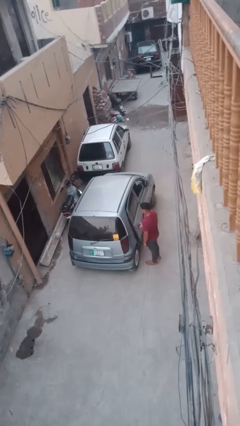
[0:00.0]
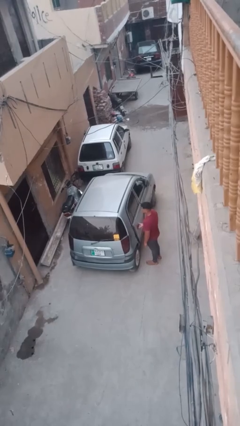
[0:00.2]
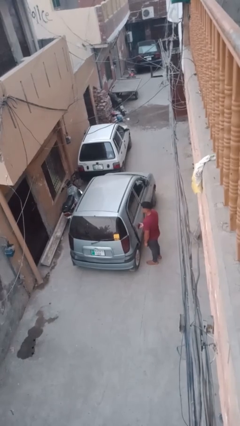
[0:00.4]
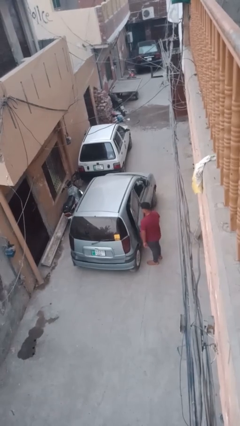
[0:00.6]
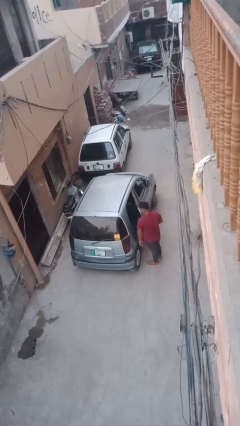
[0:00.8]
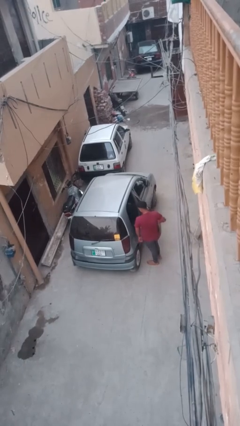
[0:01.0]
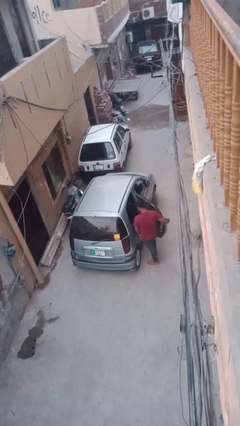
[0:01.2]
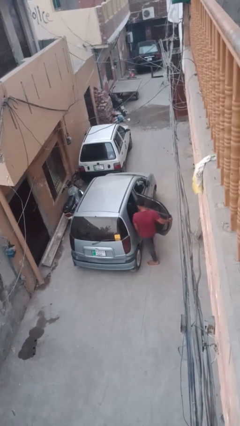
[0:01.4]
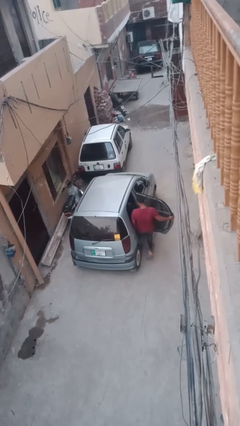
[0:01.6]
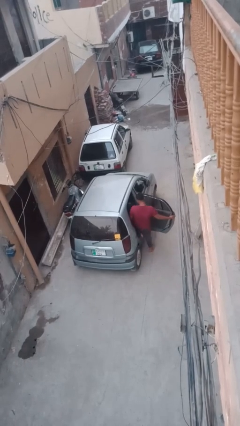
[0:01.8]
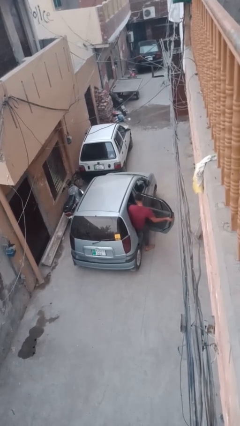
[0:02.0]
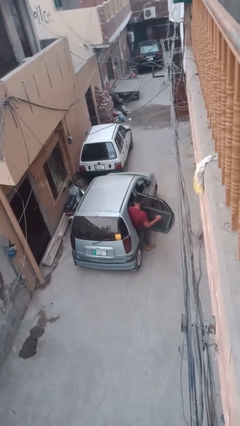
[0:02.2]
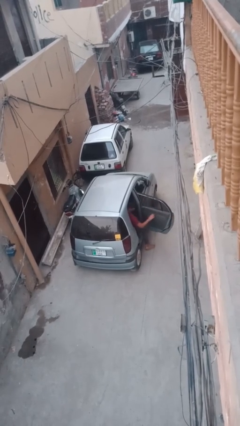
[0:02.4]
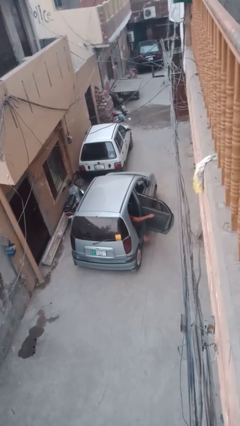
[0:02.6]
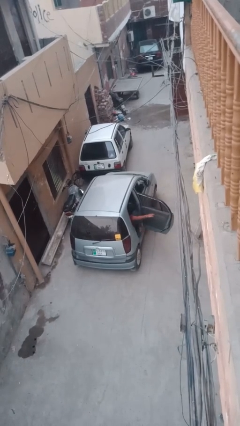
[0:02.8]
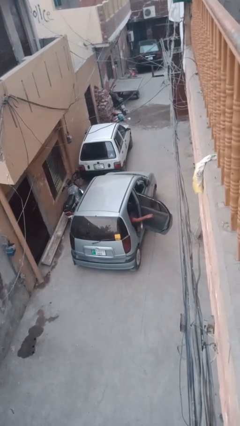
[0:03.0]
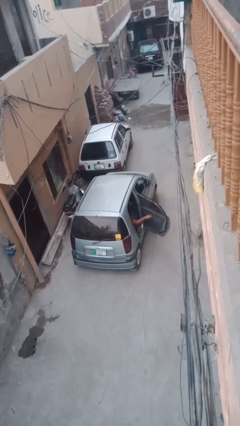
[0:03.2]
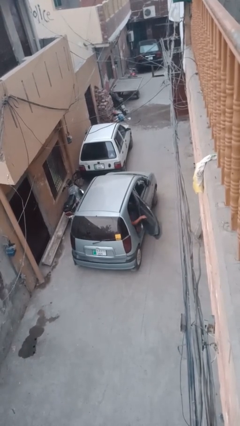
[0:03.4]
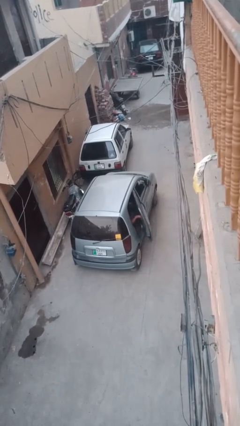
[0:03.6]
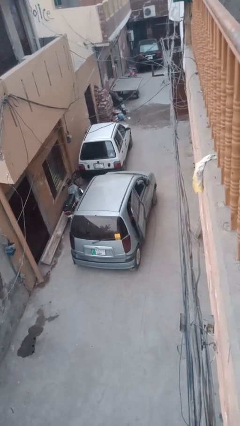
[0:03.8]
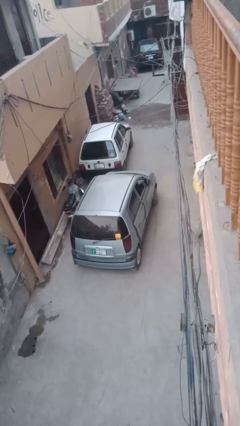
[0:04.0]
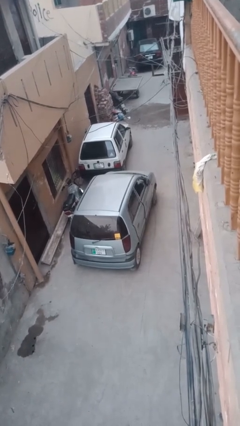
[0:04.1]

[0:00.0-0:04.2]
car picks up person

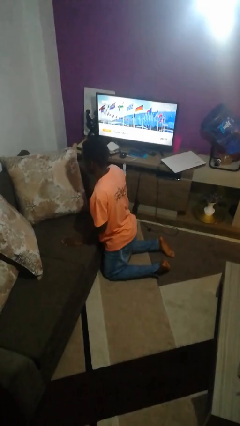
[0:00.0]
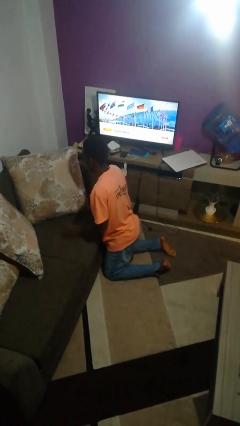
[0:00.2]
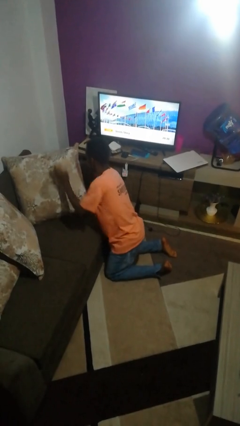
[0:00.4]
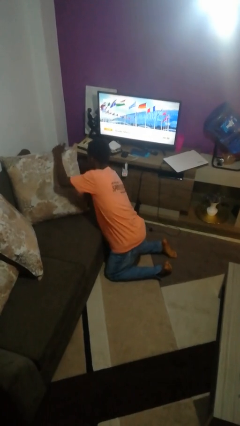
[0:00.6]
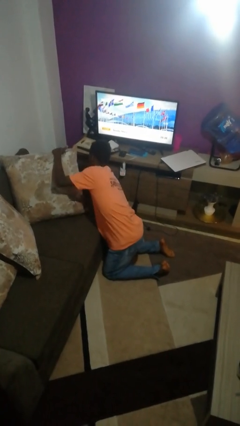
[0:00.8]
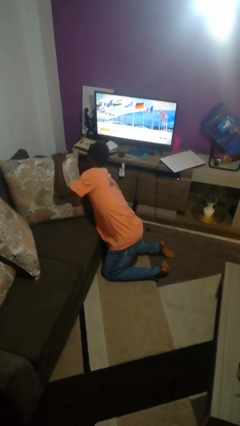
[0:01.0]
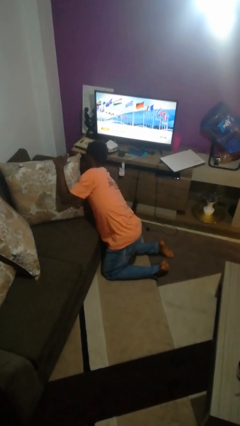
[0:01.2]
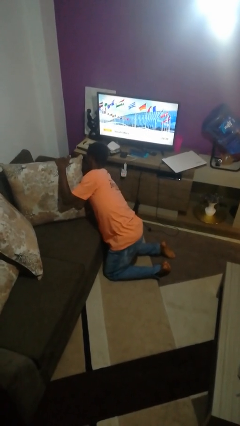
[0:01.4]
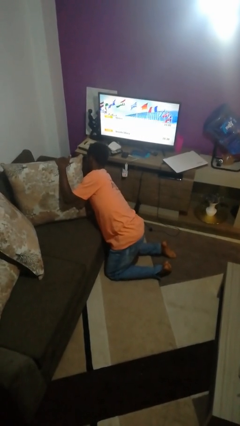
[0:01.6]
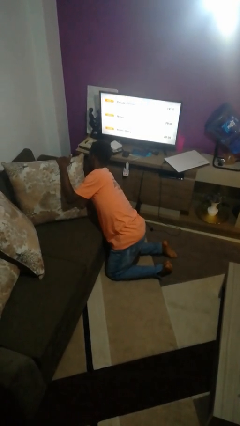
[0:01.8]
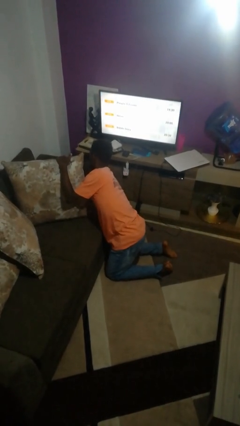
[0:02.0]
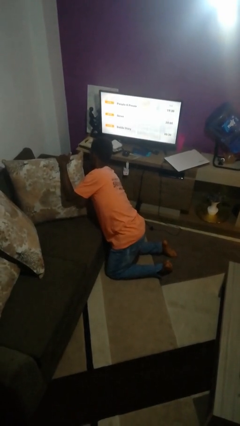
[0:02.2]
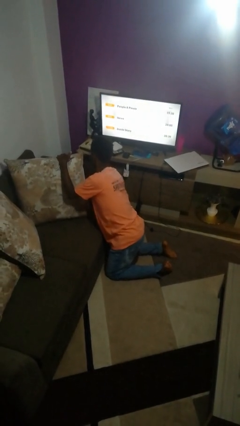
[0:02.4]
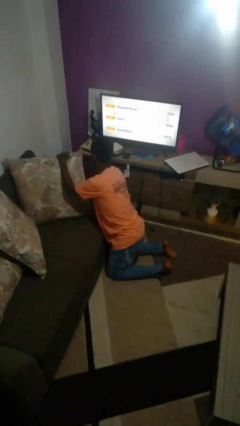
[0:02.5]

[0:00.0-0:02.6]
person searches in couch

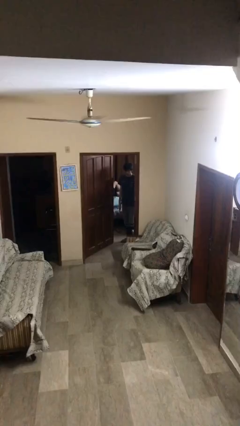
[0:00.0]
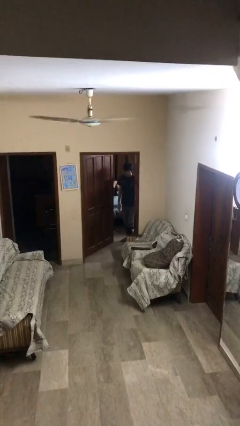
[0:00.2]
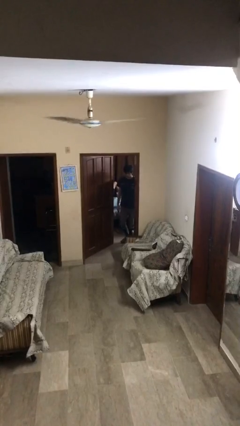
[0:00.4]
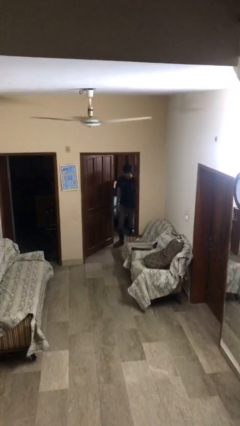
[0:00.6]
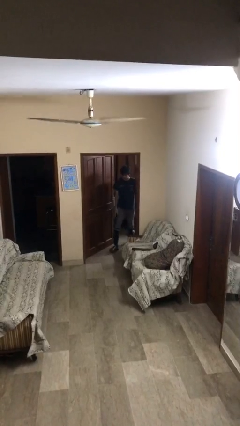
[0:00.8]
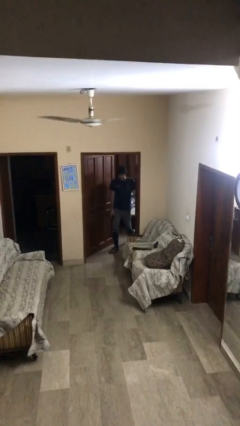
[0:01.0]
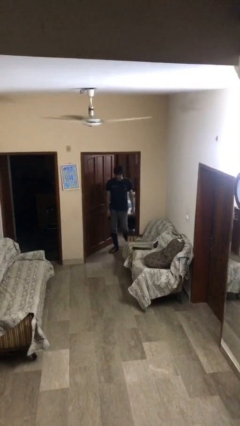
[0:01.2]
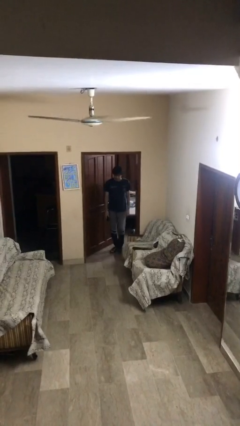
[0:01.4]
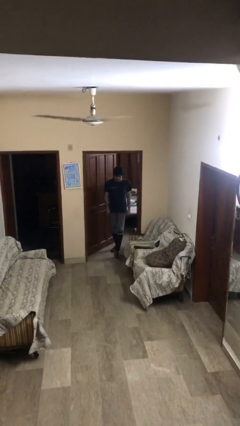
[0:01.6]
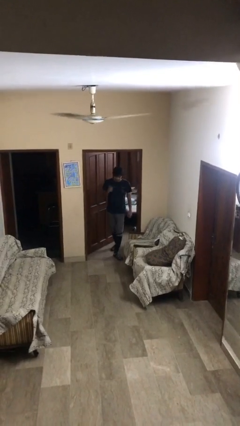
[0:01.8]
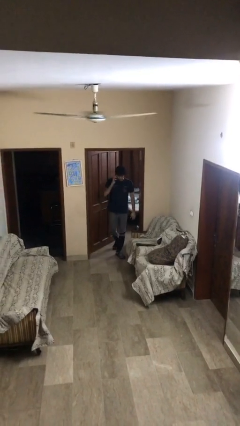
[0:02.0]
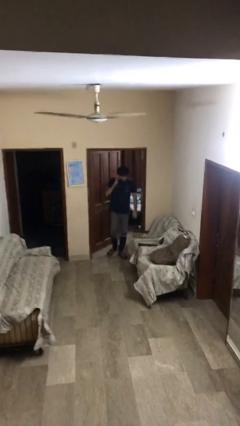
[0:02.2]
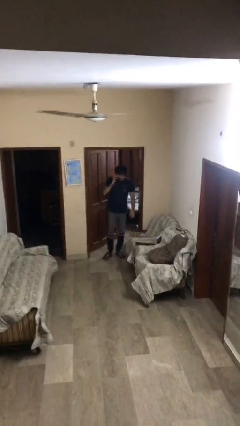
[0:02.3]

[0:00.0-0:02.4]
person enters scene through structure

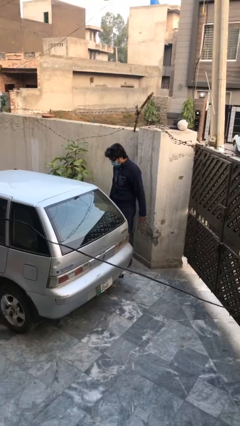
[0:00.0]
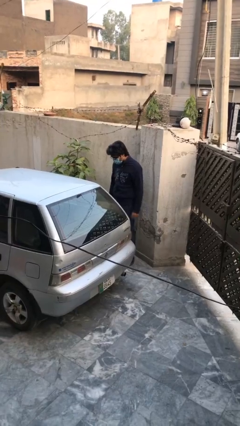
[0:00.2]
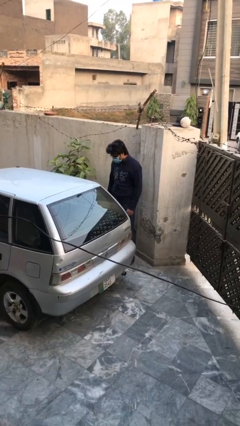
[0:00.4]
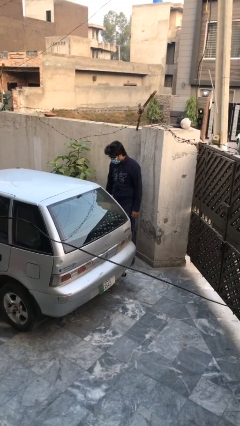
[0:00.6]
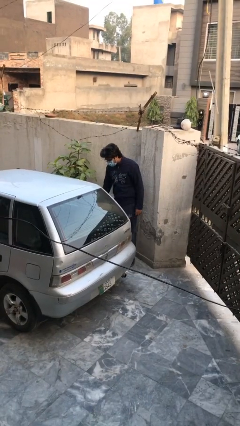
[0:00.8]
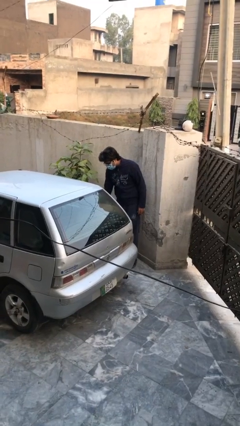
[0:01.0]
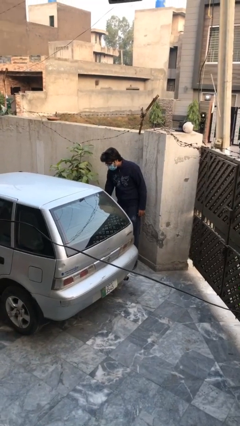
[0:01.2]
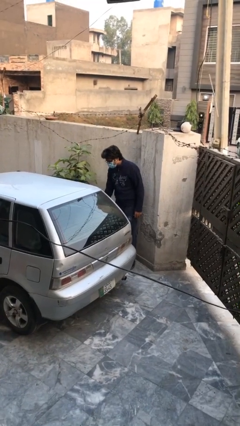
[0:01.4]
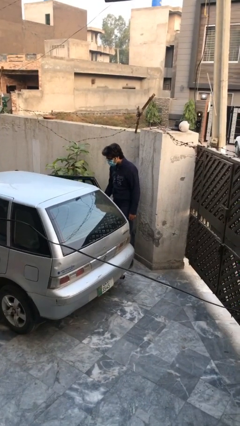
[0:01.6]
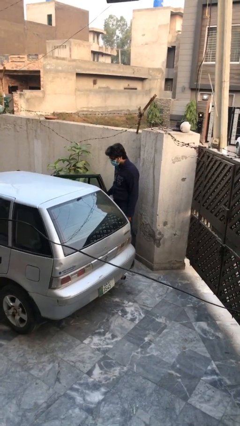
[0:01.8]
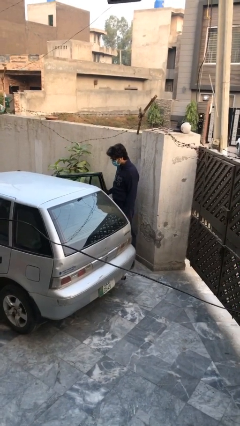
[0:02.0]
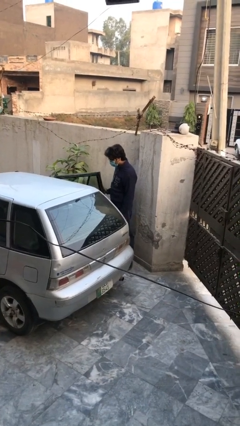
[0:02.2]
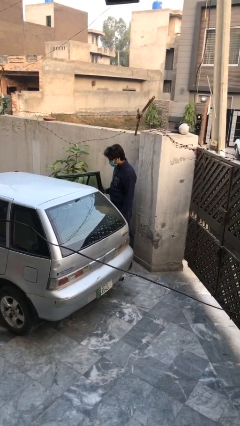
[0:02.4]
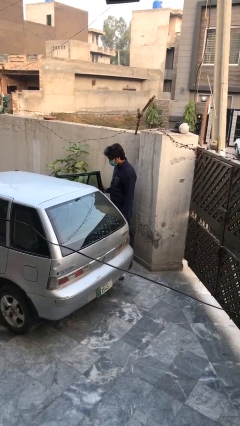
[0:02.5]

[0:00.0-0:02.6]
person opens car door

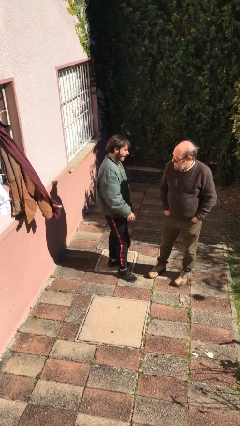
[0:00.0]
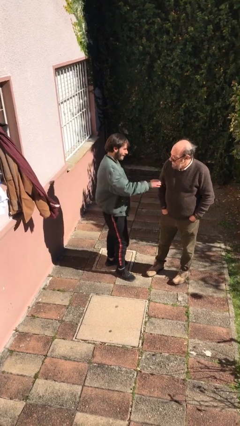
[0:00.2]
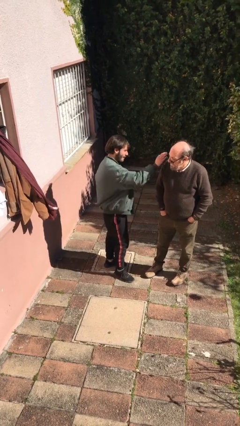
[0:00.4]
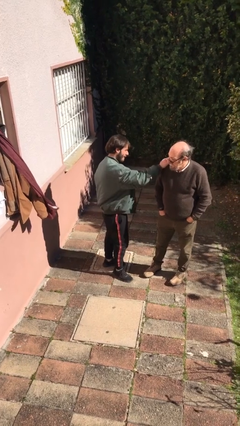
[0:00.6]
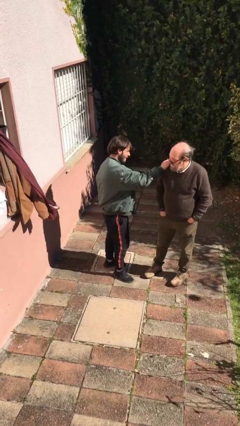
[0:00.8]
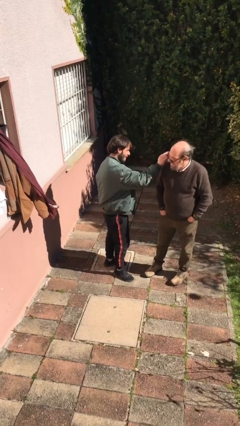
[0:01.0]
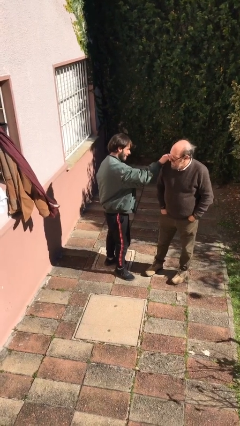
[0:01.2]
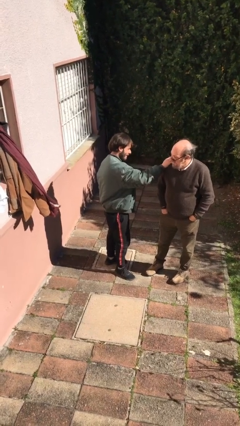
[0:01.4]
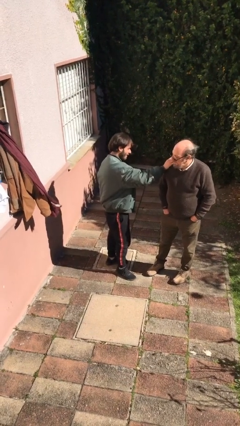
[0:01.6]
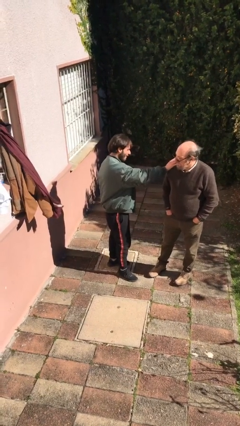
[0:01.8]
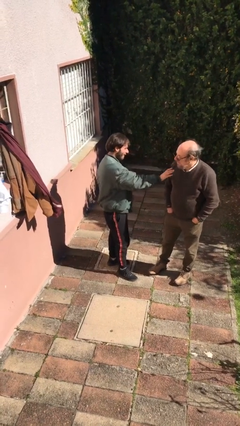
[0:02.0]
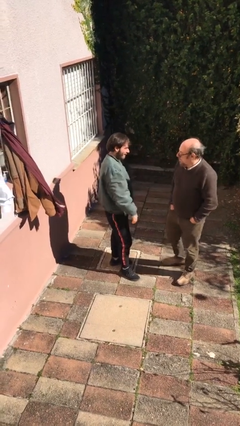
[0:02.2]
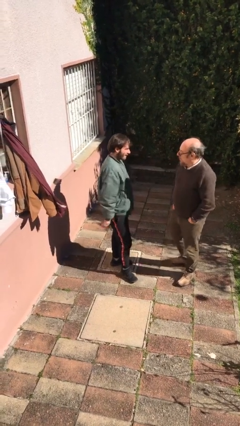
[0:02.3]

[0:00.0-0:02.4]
person pounds shoulders of person

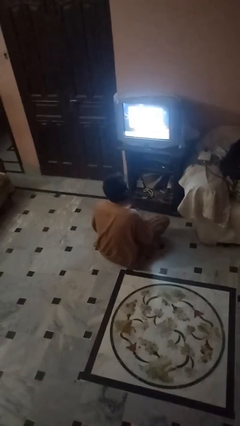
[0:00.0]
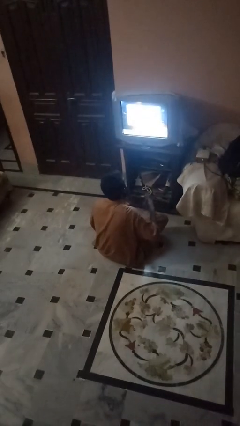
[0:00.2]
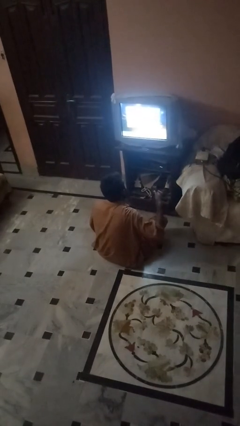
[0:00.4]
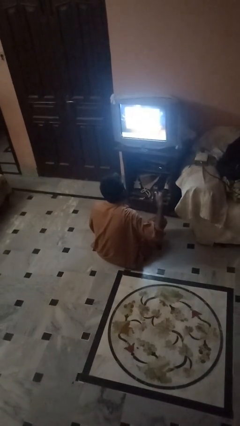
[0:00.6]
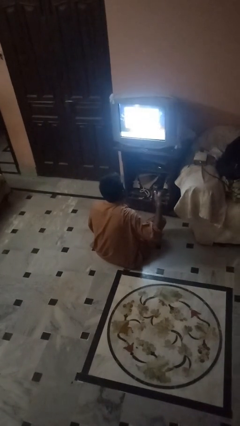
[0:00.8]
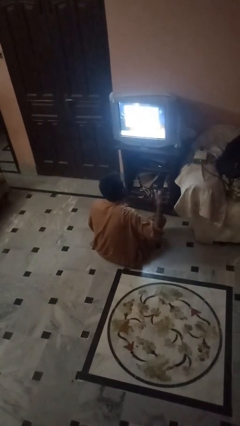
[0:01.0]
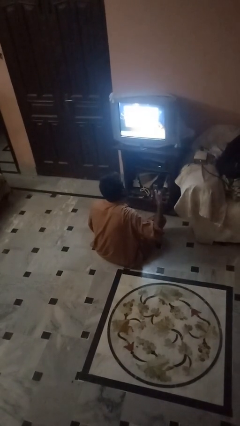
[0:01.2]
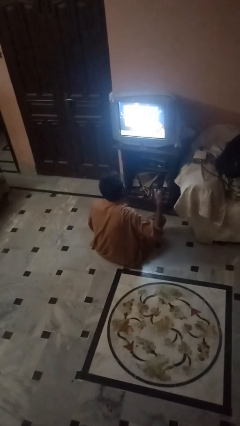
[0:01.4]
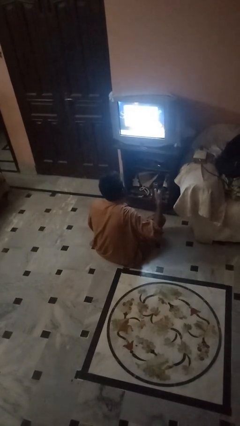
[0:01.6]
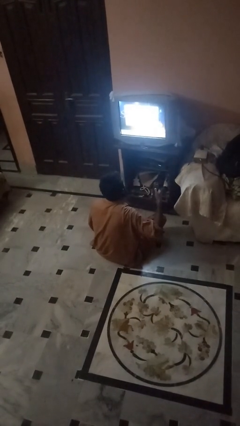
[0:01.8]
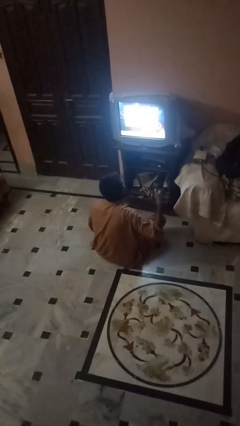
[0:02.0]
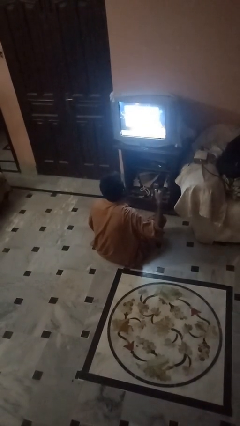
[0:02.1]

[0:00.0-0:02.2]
person uses television remote

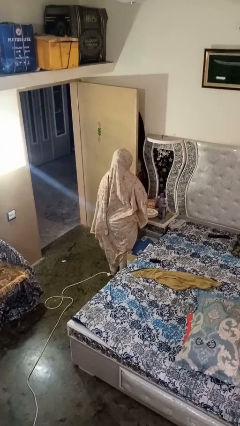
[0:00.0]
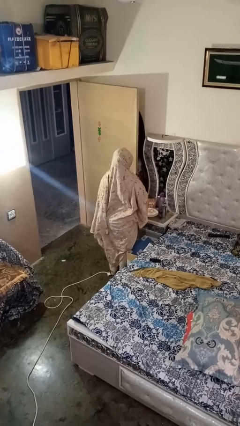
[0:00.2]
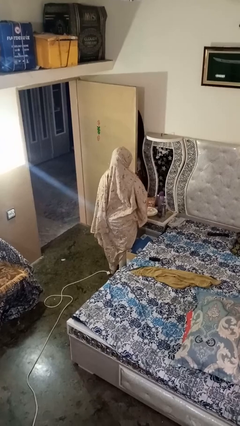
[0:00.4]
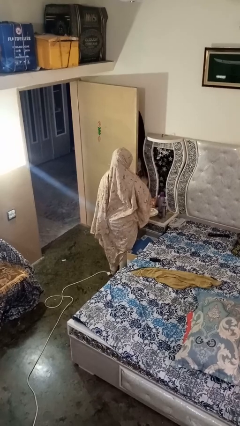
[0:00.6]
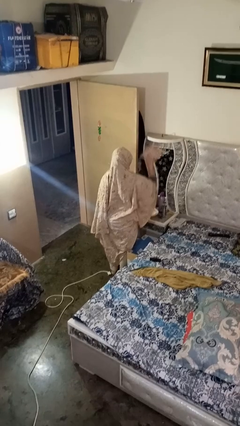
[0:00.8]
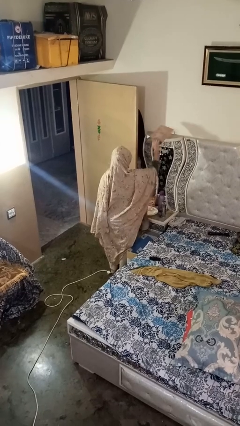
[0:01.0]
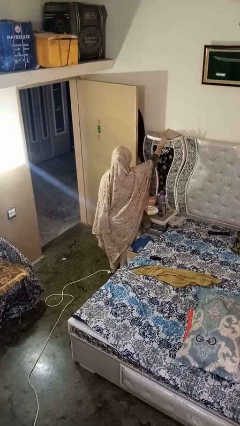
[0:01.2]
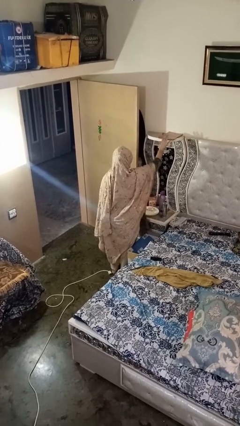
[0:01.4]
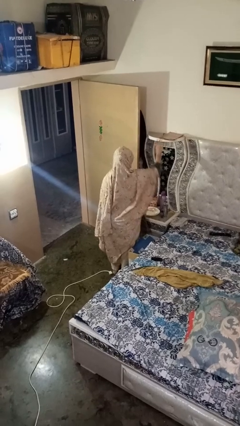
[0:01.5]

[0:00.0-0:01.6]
person puts down object on shelf
